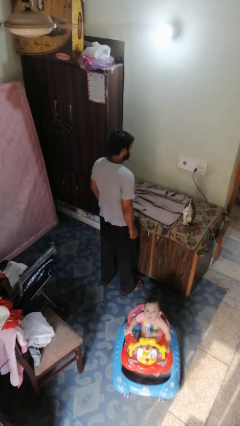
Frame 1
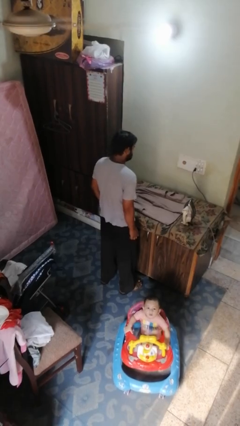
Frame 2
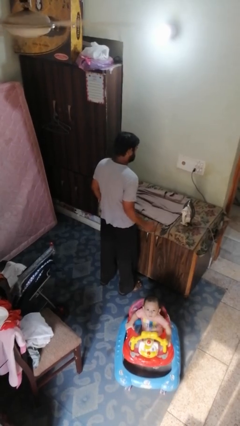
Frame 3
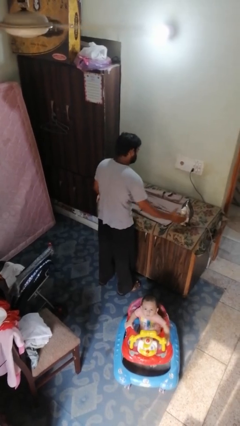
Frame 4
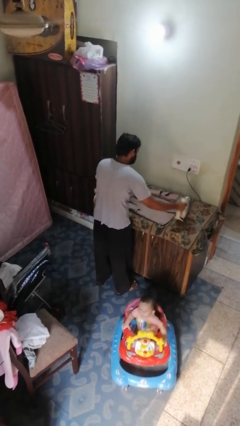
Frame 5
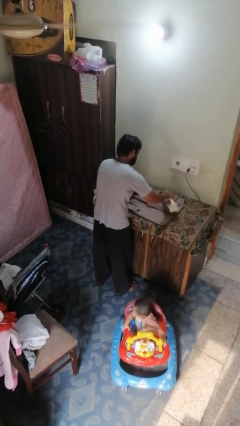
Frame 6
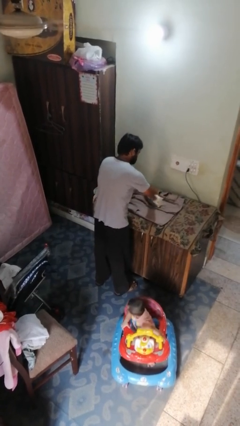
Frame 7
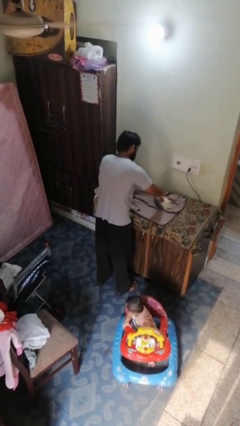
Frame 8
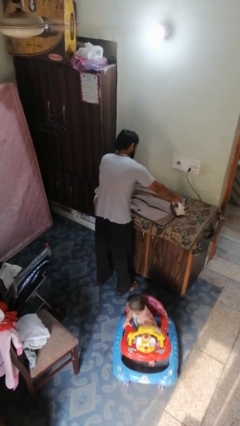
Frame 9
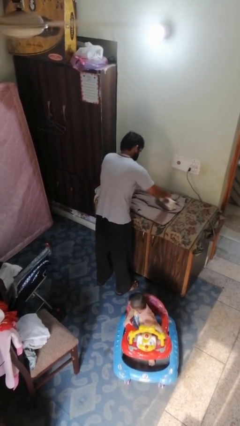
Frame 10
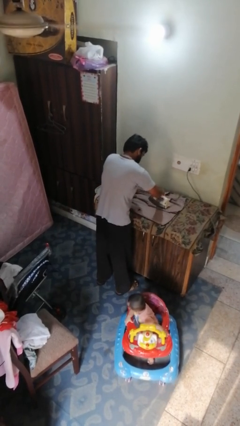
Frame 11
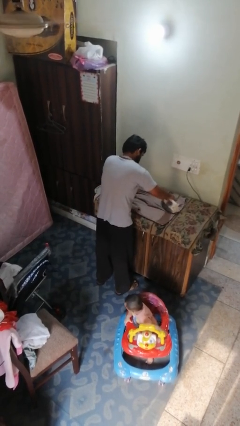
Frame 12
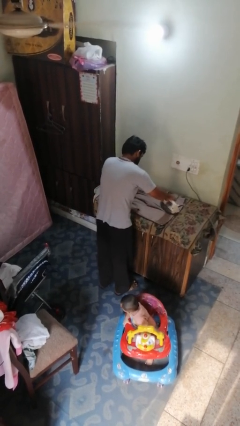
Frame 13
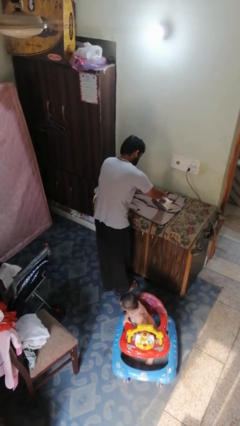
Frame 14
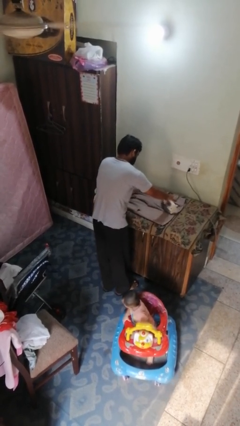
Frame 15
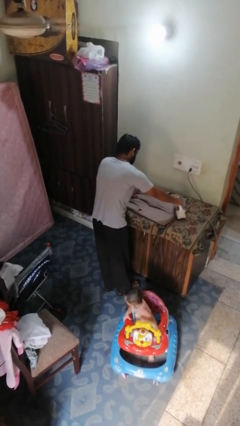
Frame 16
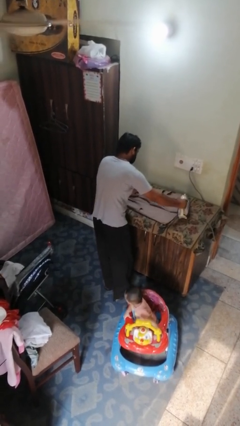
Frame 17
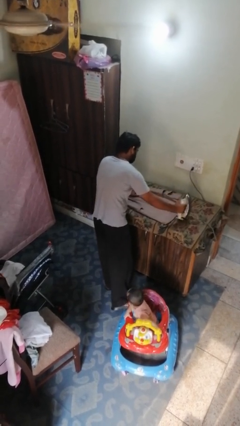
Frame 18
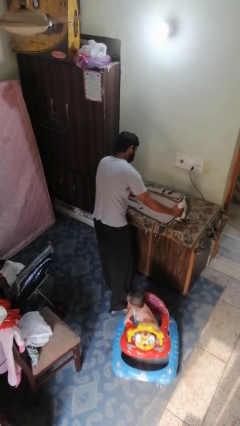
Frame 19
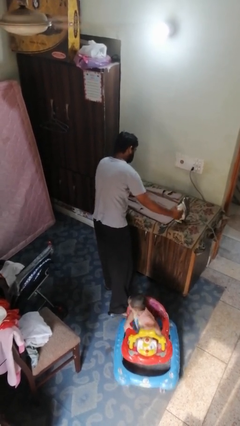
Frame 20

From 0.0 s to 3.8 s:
person irons clothes

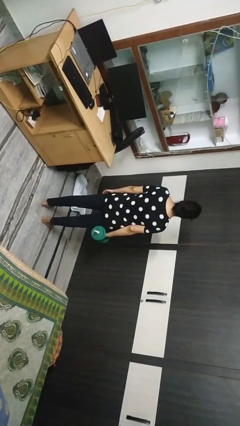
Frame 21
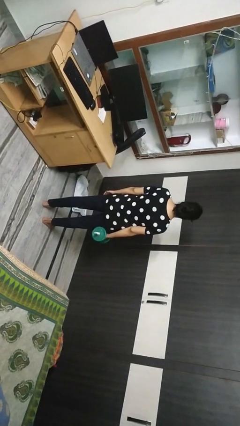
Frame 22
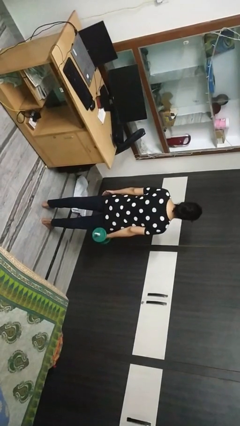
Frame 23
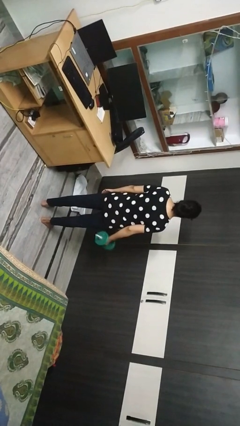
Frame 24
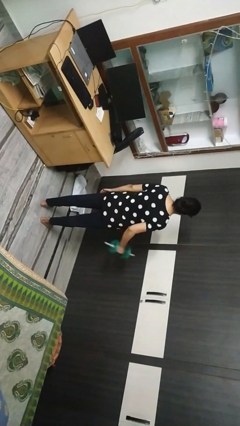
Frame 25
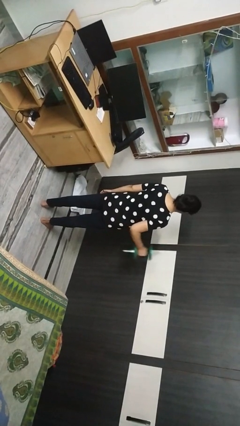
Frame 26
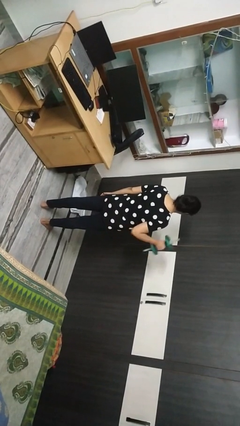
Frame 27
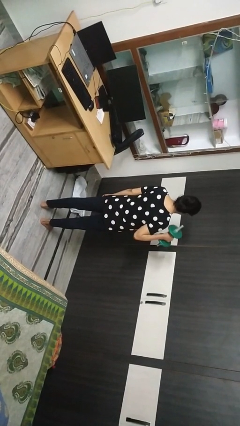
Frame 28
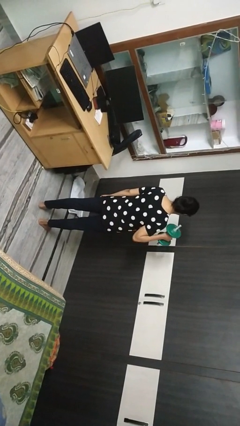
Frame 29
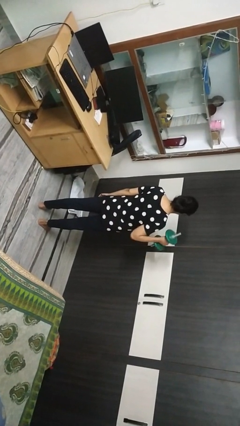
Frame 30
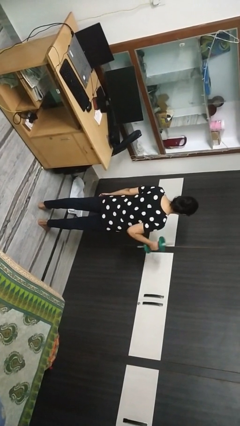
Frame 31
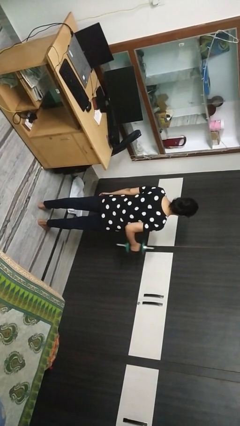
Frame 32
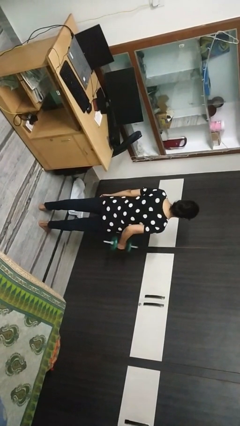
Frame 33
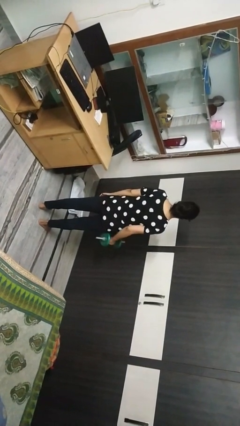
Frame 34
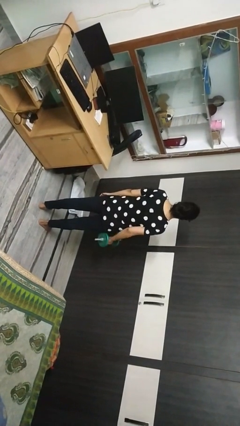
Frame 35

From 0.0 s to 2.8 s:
person lifts dumbbells

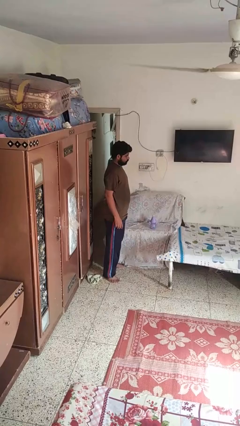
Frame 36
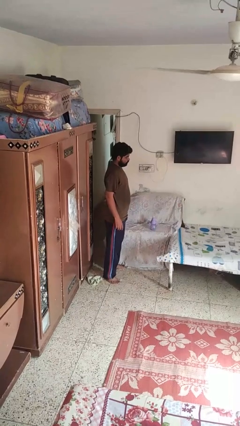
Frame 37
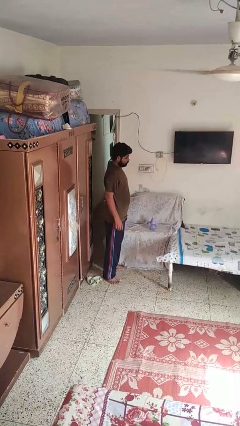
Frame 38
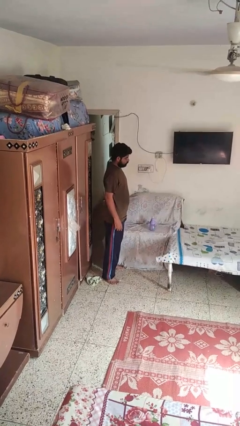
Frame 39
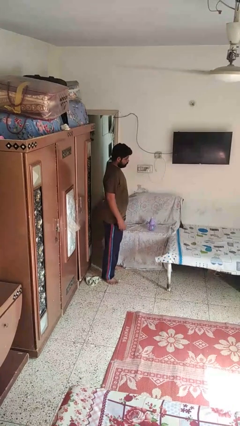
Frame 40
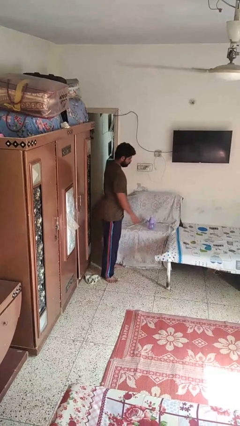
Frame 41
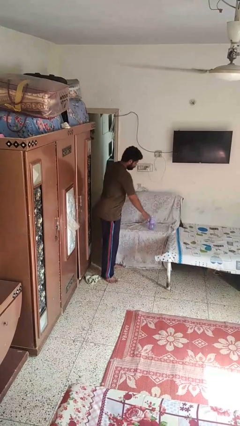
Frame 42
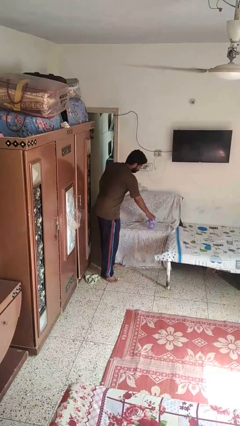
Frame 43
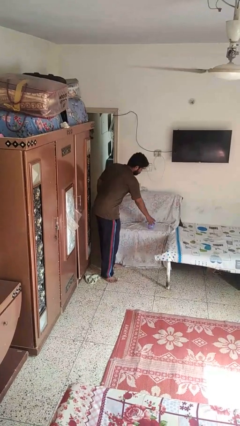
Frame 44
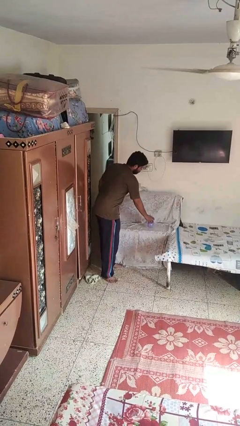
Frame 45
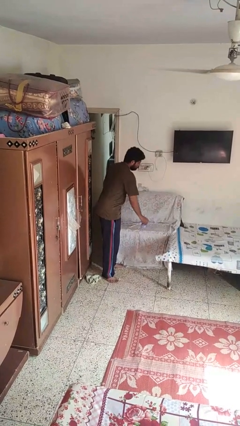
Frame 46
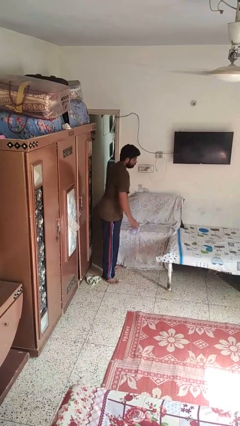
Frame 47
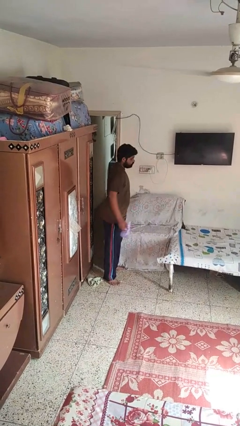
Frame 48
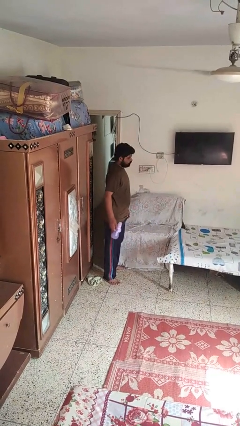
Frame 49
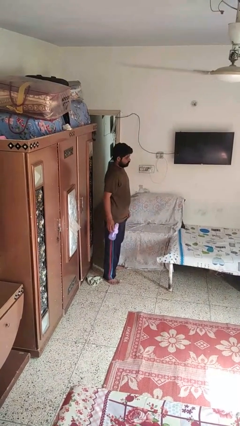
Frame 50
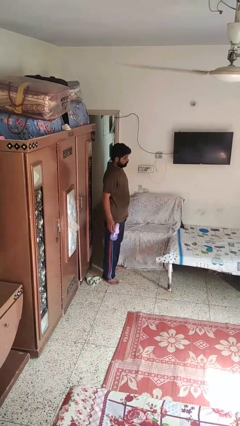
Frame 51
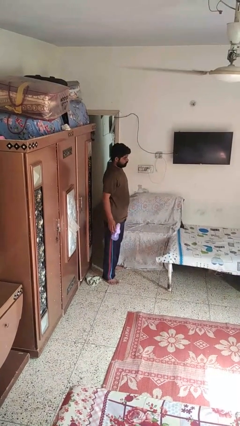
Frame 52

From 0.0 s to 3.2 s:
person picks up object from couch

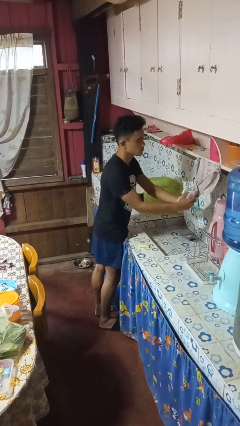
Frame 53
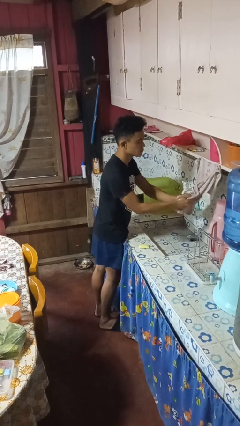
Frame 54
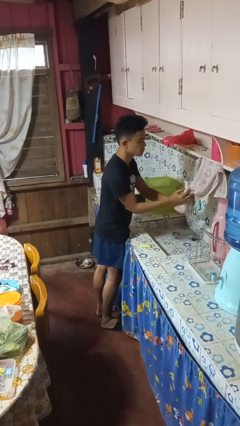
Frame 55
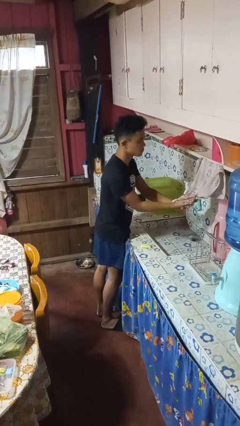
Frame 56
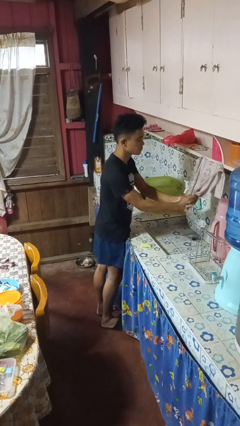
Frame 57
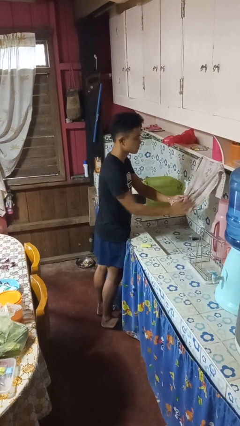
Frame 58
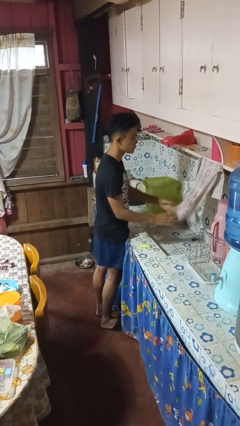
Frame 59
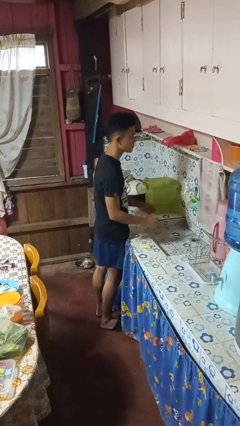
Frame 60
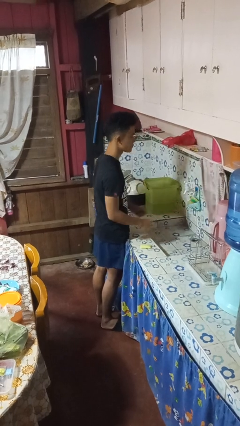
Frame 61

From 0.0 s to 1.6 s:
person dries hands with towel

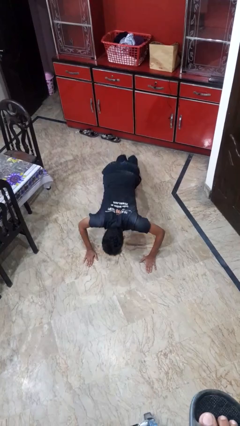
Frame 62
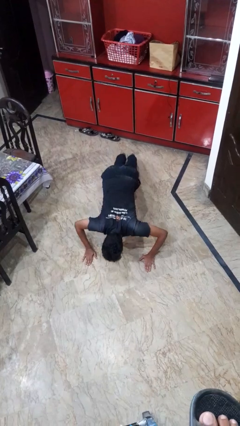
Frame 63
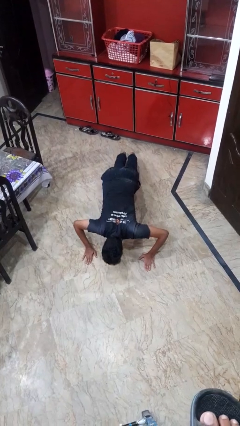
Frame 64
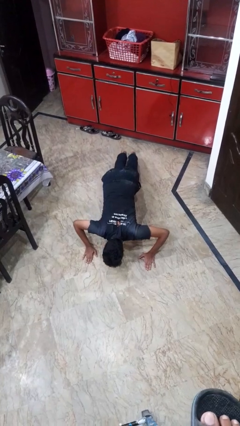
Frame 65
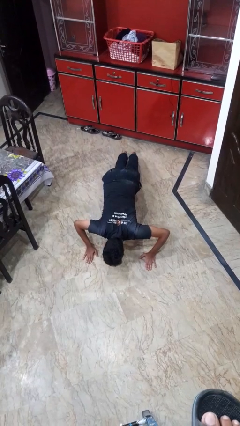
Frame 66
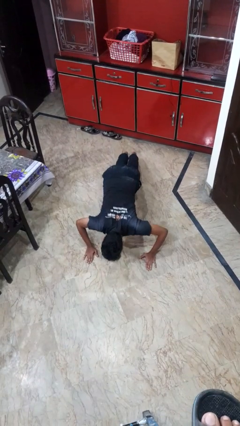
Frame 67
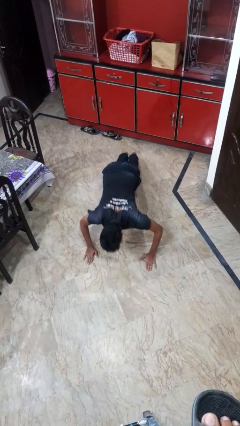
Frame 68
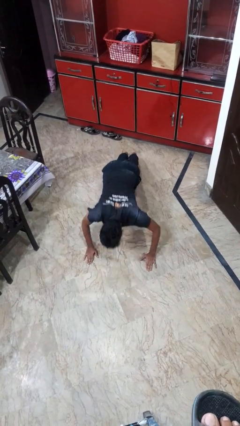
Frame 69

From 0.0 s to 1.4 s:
person exercises with pushup

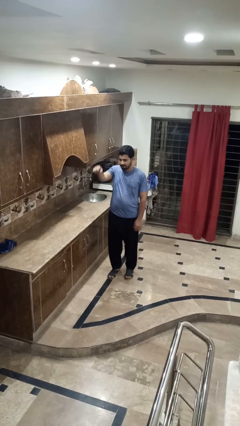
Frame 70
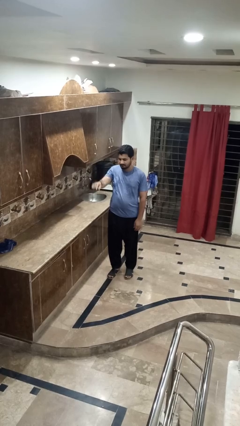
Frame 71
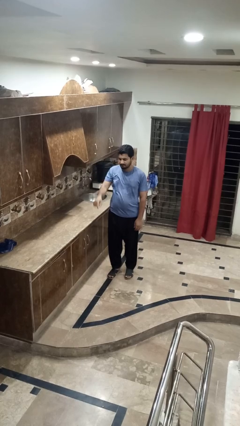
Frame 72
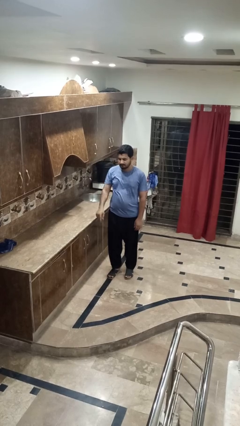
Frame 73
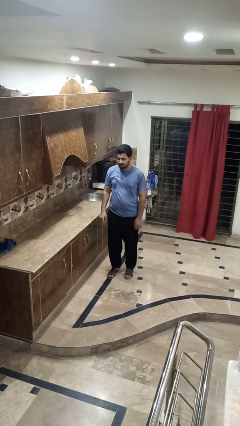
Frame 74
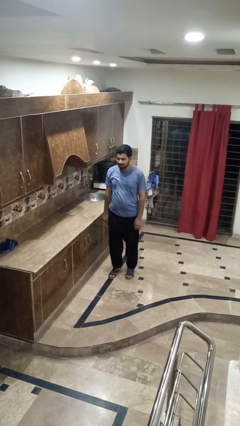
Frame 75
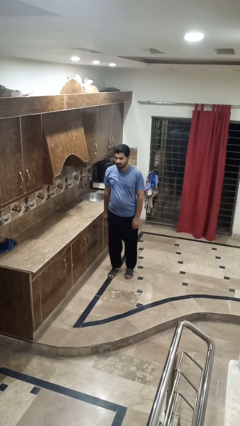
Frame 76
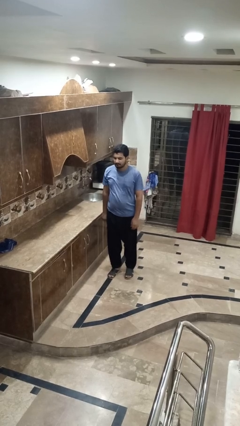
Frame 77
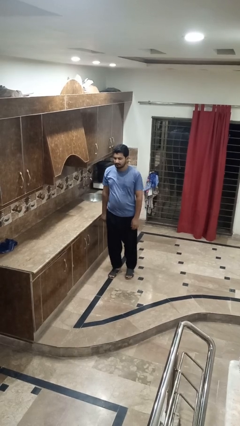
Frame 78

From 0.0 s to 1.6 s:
person gestures swipe down

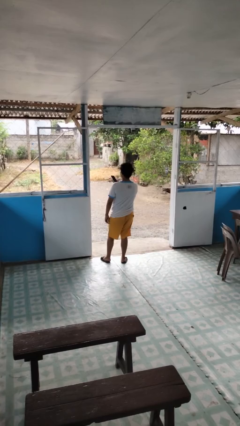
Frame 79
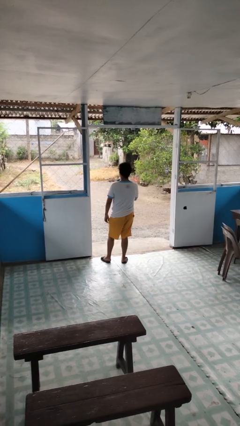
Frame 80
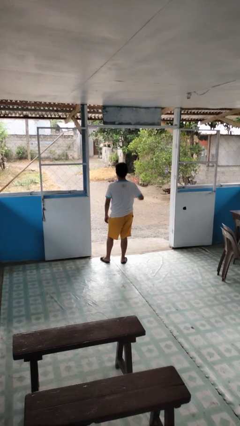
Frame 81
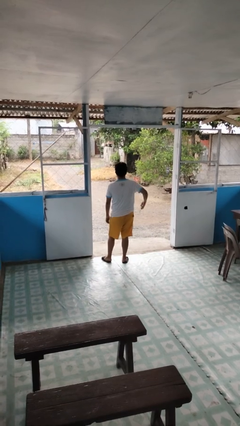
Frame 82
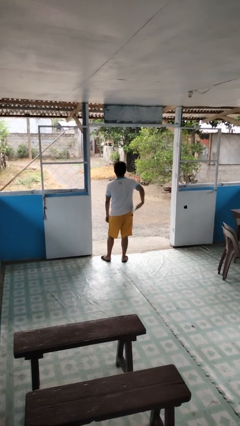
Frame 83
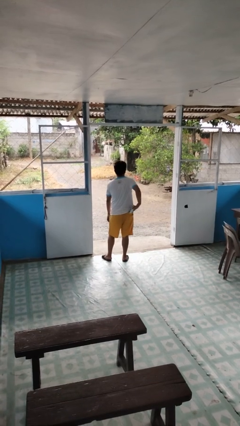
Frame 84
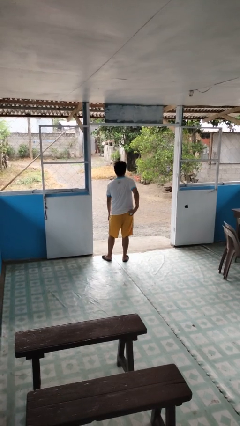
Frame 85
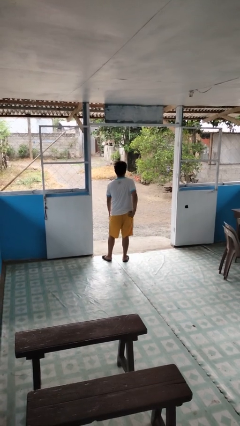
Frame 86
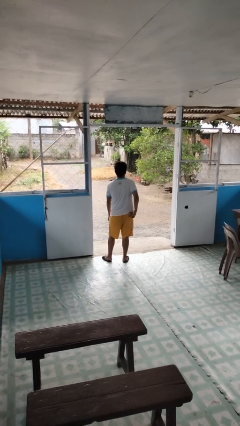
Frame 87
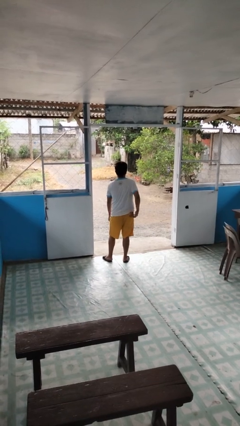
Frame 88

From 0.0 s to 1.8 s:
person puts phone into pocket

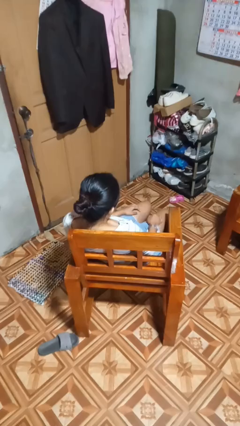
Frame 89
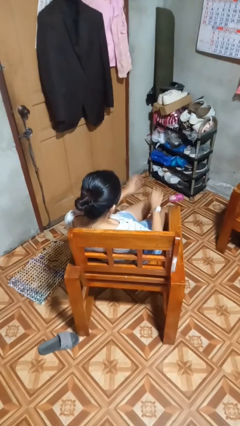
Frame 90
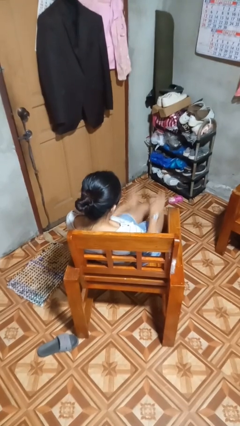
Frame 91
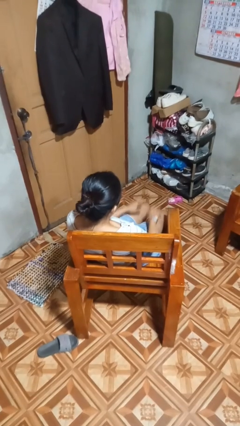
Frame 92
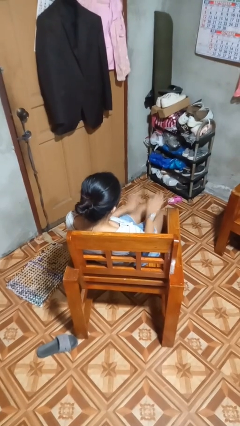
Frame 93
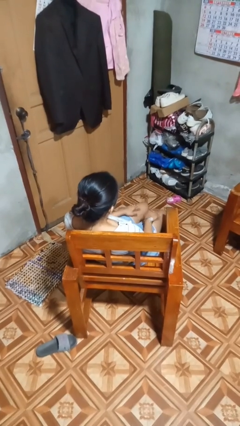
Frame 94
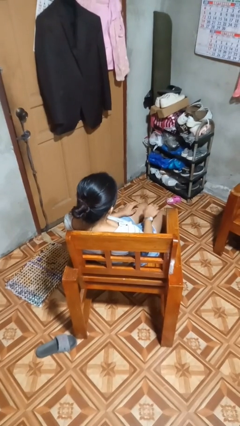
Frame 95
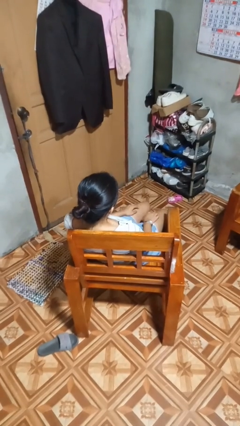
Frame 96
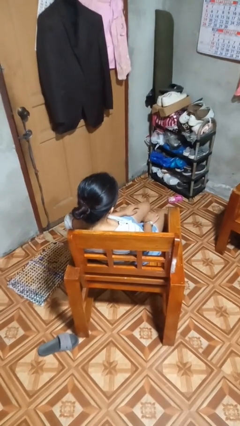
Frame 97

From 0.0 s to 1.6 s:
person slaps hands on thighs
